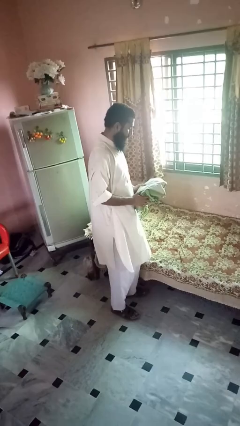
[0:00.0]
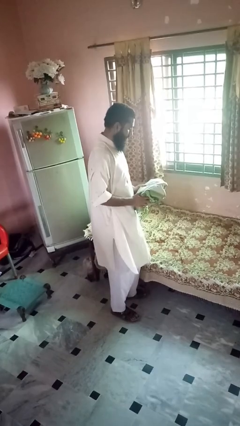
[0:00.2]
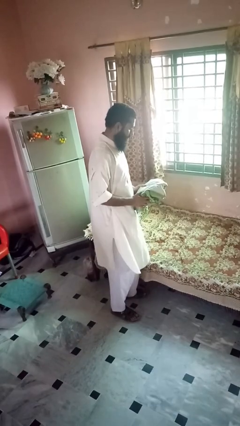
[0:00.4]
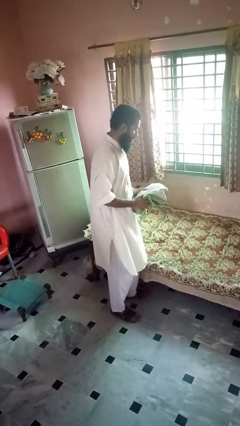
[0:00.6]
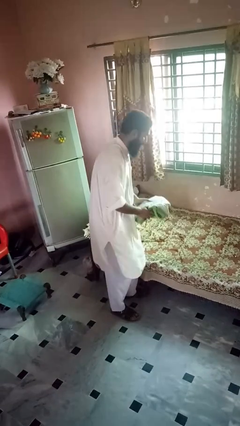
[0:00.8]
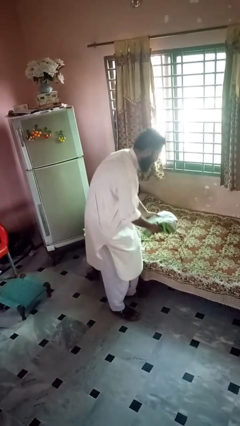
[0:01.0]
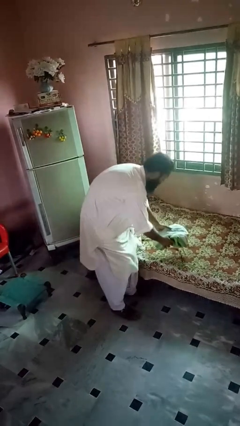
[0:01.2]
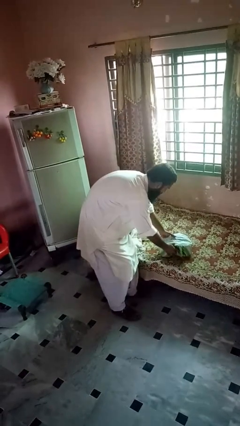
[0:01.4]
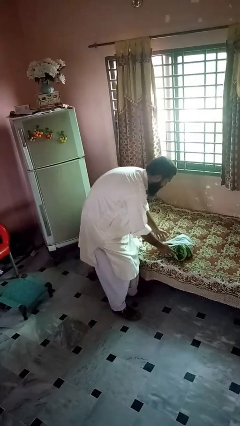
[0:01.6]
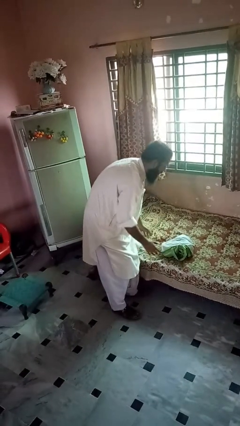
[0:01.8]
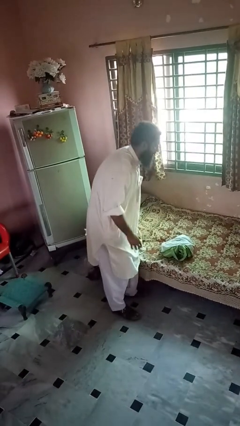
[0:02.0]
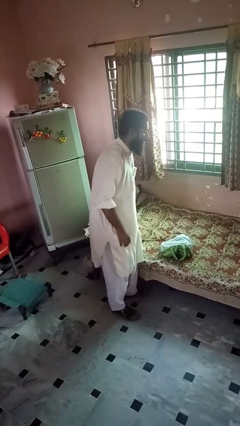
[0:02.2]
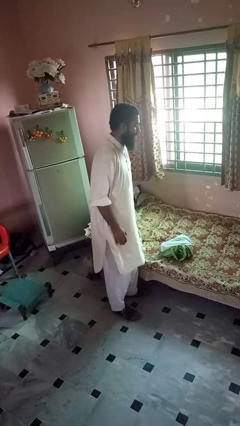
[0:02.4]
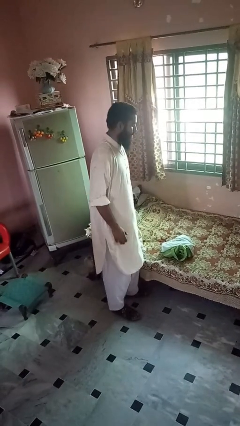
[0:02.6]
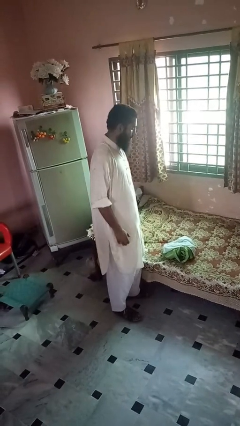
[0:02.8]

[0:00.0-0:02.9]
person puts down object on bed

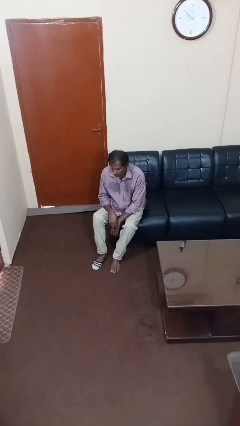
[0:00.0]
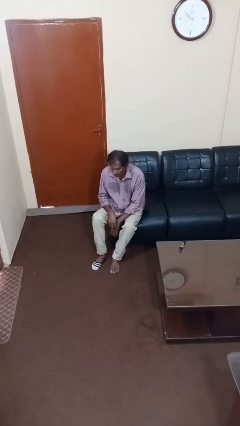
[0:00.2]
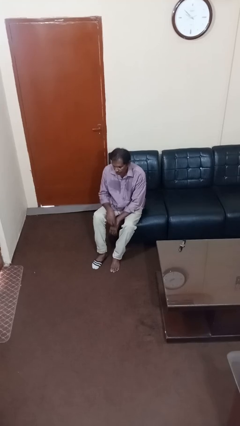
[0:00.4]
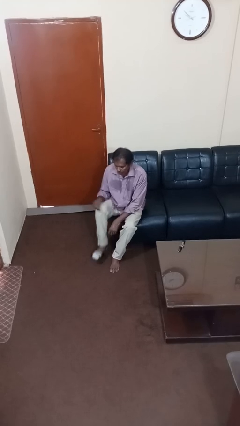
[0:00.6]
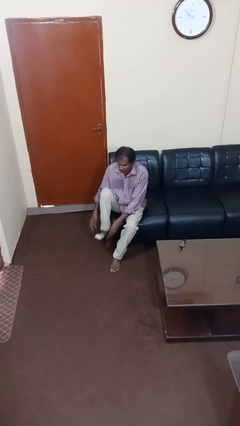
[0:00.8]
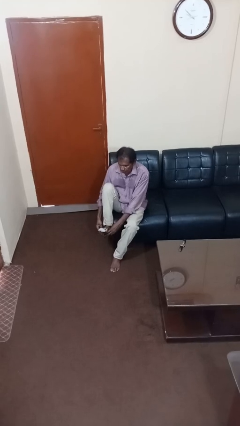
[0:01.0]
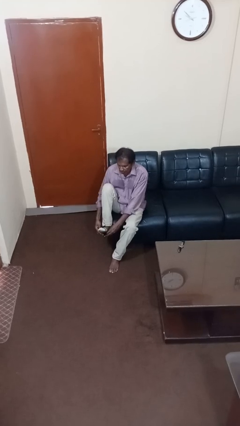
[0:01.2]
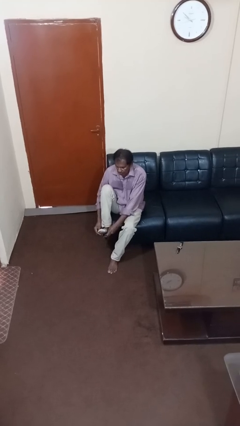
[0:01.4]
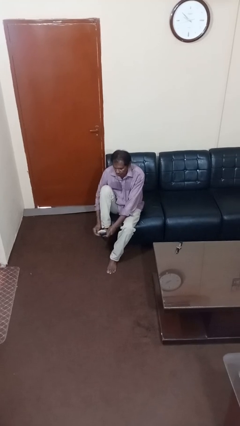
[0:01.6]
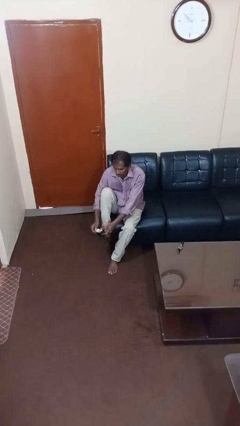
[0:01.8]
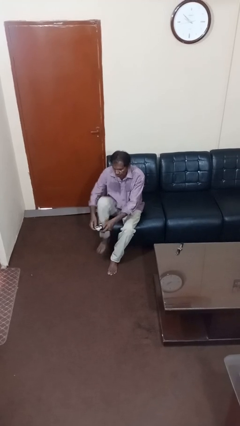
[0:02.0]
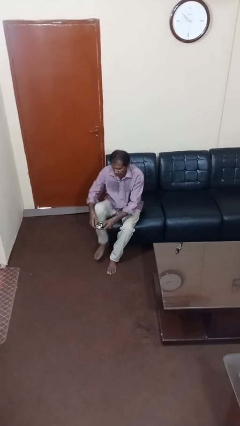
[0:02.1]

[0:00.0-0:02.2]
person takes off socks

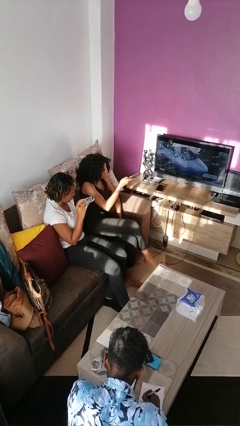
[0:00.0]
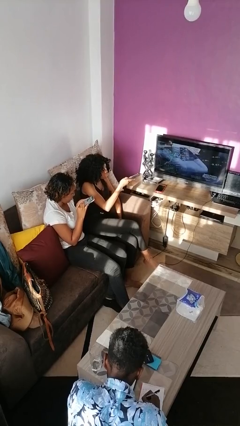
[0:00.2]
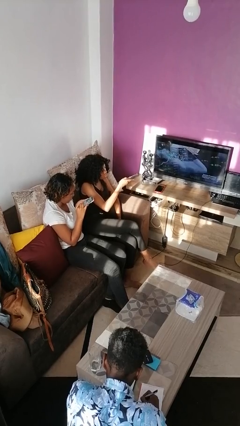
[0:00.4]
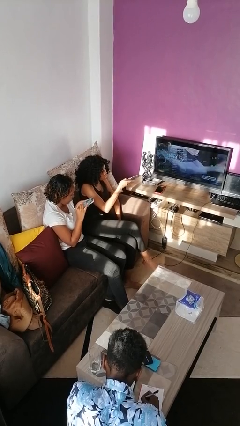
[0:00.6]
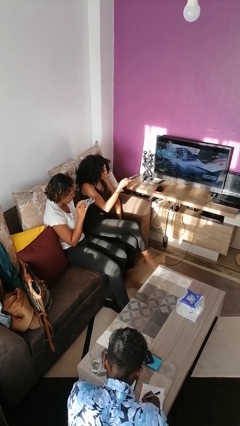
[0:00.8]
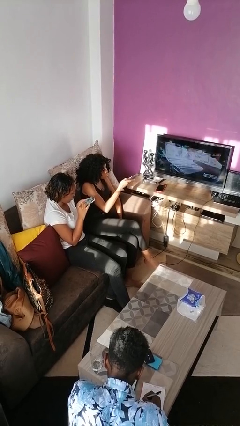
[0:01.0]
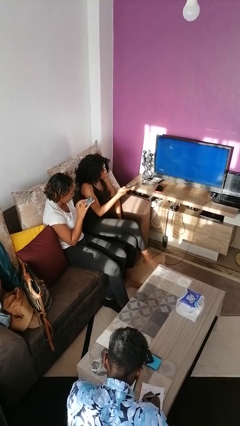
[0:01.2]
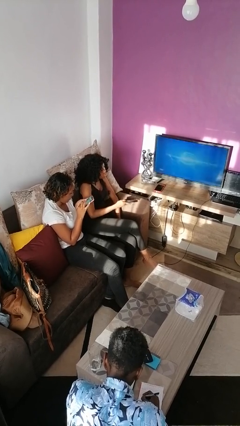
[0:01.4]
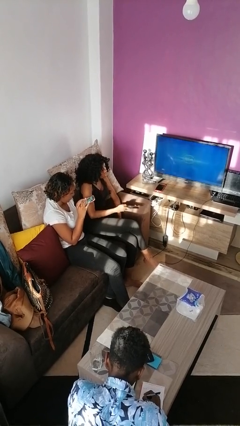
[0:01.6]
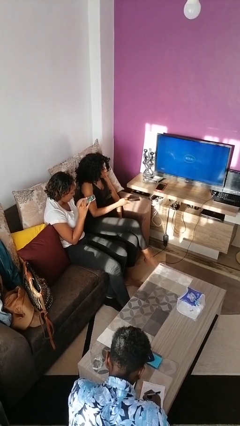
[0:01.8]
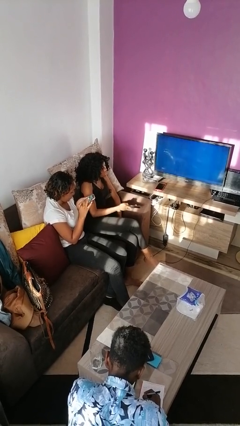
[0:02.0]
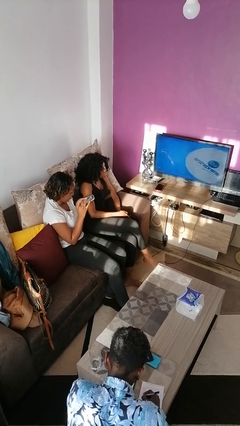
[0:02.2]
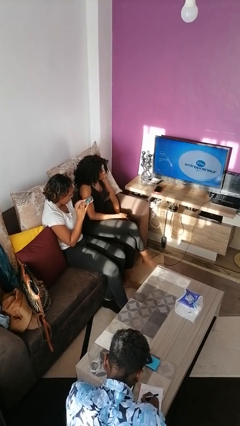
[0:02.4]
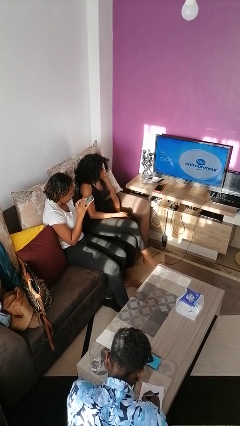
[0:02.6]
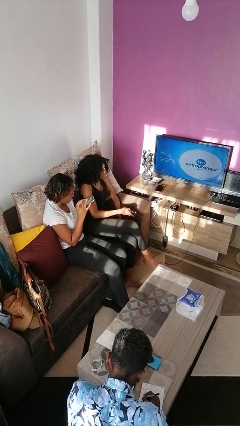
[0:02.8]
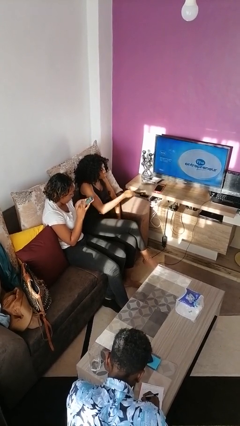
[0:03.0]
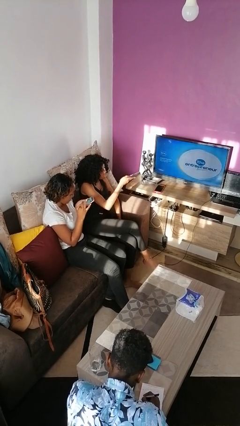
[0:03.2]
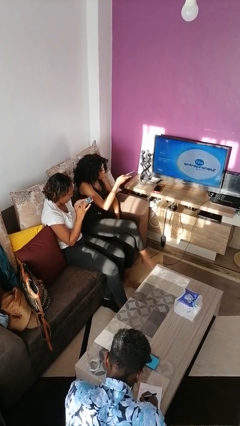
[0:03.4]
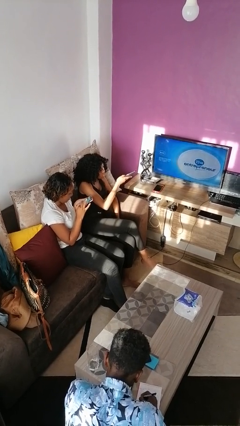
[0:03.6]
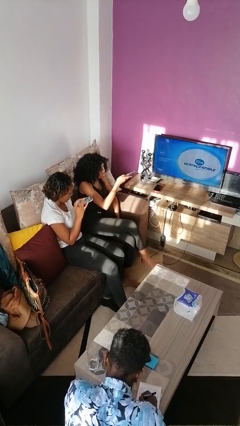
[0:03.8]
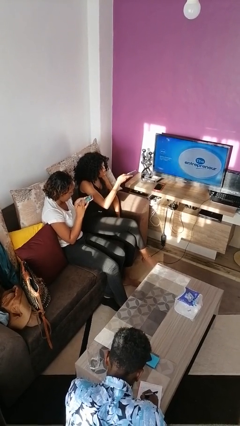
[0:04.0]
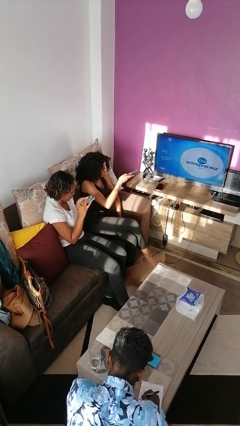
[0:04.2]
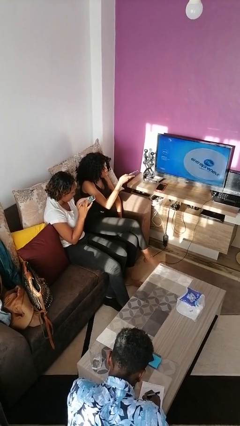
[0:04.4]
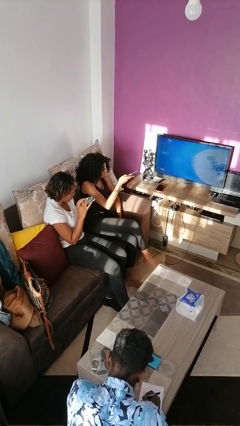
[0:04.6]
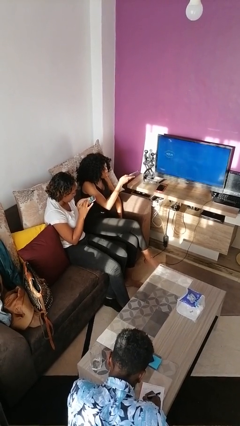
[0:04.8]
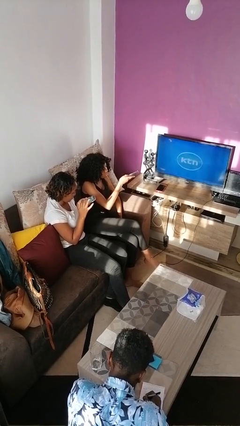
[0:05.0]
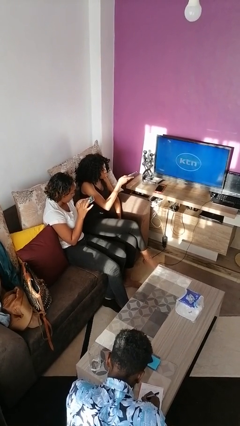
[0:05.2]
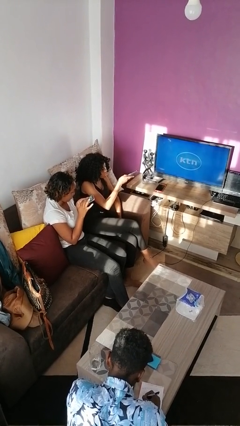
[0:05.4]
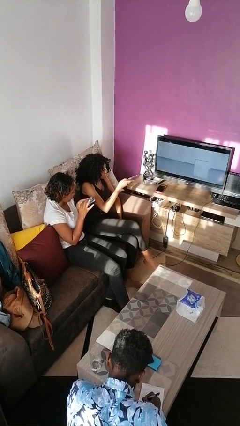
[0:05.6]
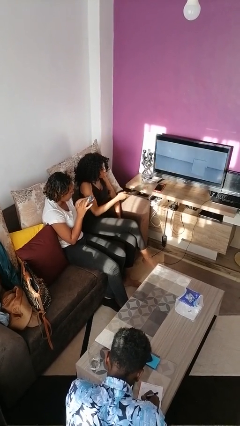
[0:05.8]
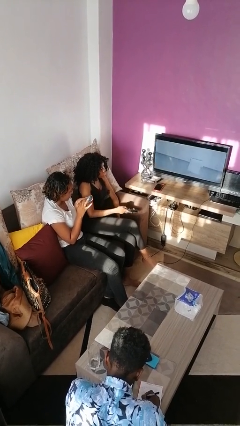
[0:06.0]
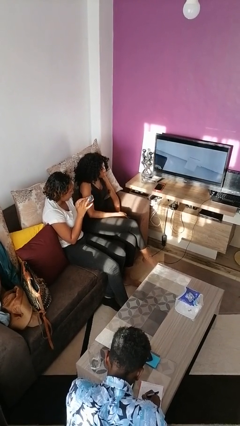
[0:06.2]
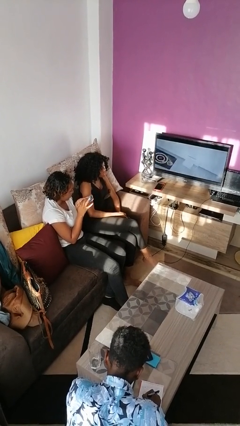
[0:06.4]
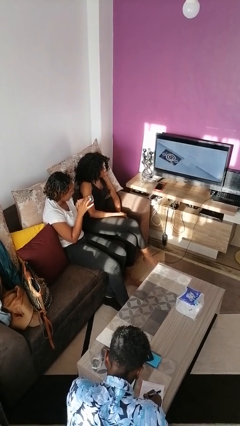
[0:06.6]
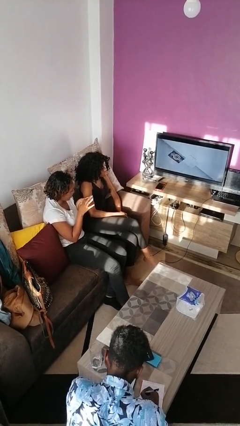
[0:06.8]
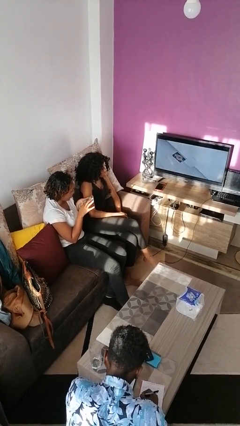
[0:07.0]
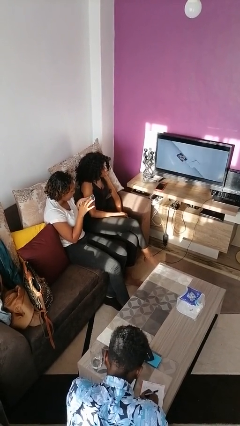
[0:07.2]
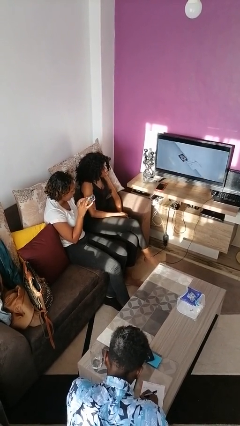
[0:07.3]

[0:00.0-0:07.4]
person puts on boots

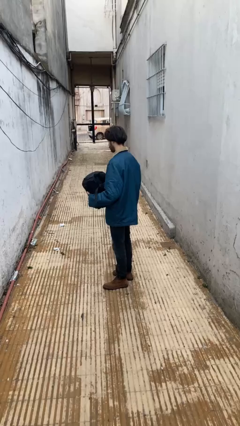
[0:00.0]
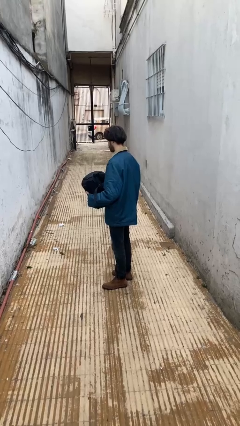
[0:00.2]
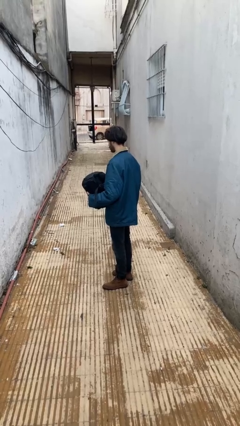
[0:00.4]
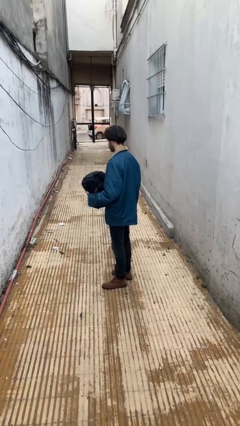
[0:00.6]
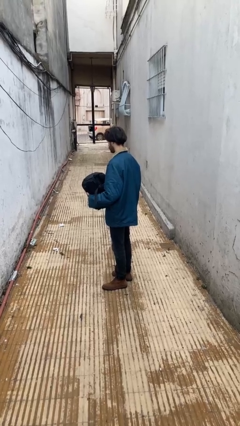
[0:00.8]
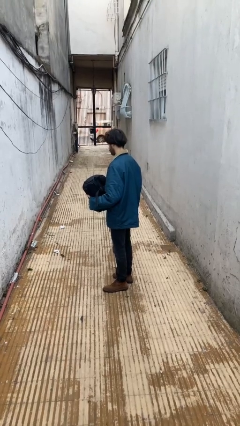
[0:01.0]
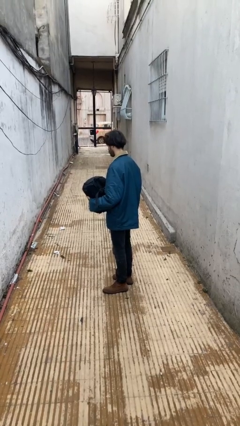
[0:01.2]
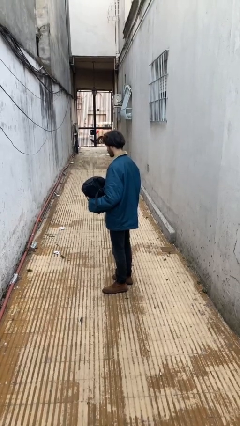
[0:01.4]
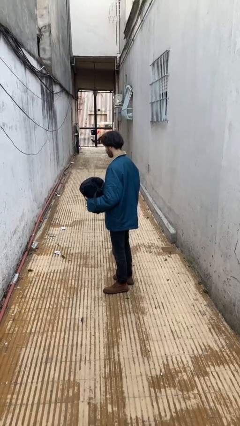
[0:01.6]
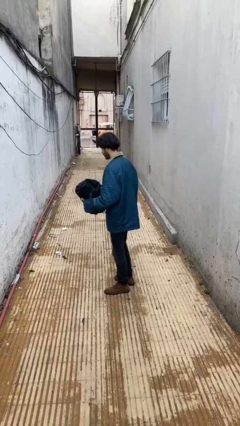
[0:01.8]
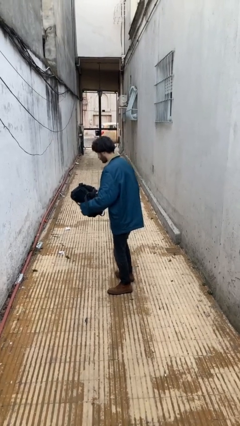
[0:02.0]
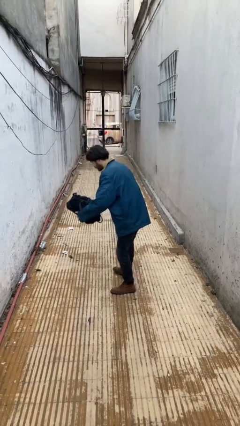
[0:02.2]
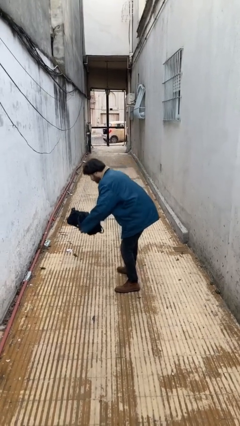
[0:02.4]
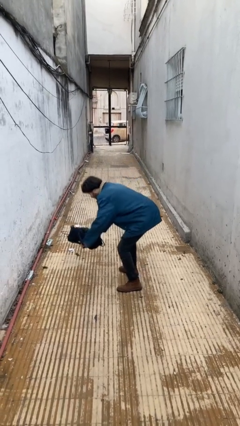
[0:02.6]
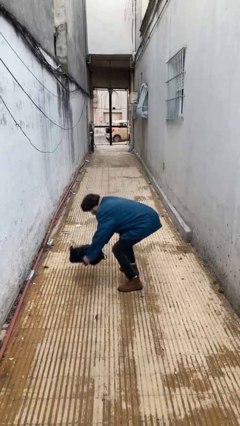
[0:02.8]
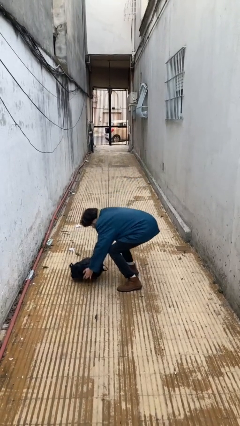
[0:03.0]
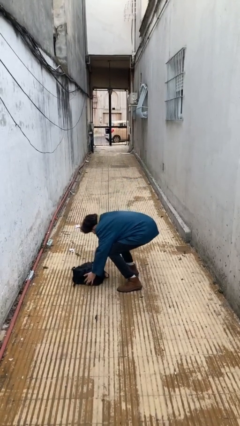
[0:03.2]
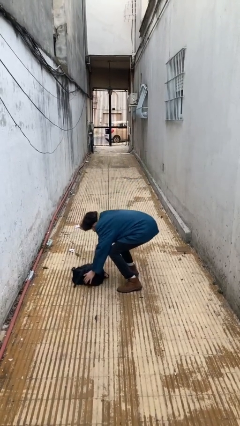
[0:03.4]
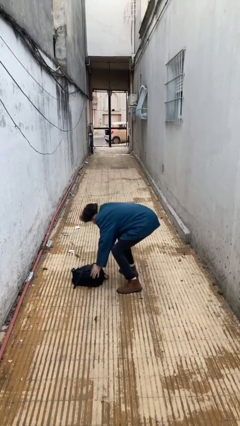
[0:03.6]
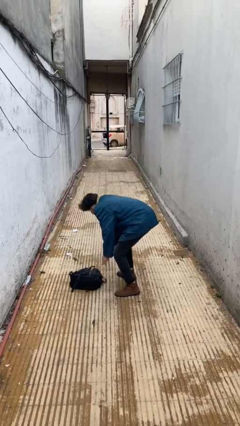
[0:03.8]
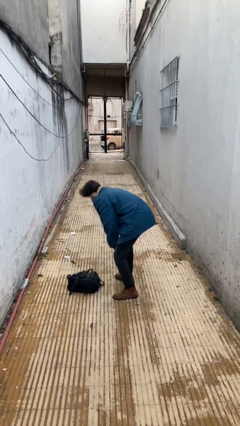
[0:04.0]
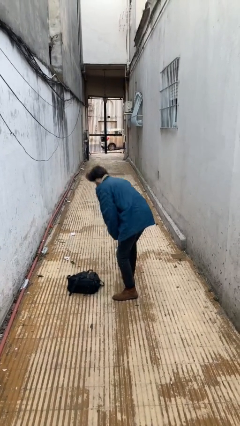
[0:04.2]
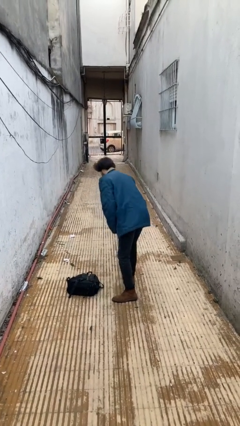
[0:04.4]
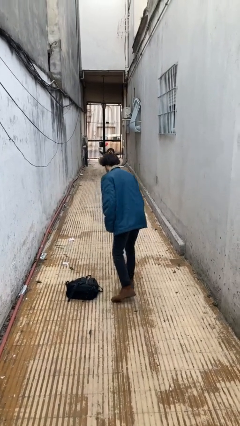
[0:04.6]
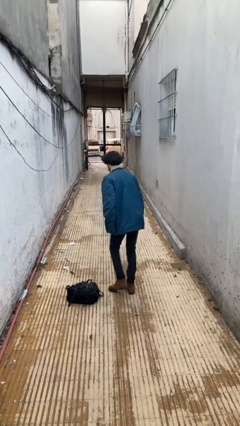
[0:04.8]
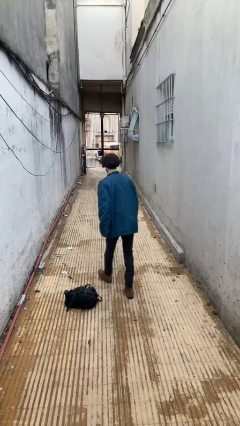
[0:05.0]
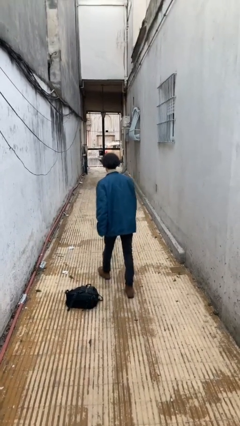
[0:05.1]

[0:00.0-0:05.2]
person puts down object on floor

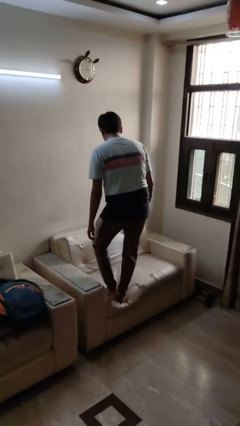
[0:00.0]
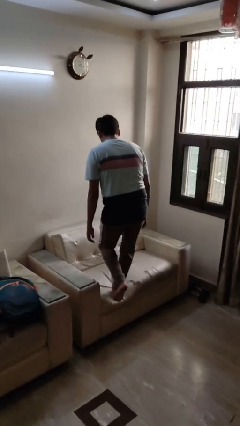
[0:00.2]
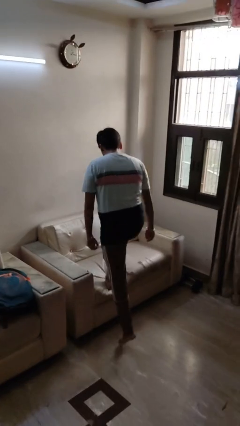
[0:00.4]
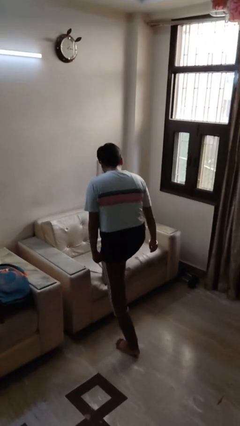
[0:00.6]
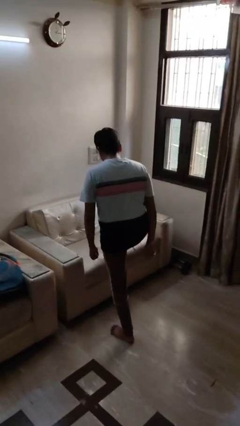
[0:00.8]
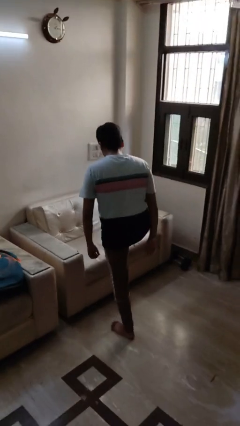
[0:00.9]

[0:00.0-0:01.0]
person climbs off couch
